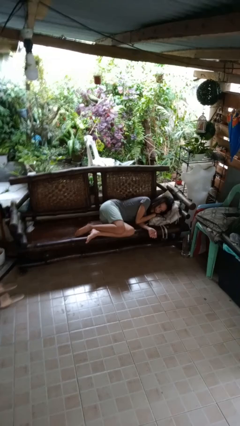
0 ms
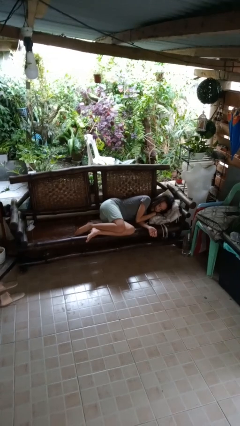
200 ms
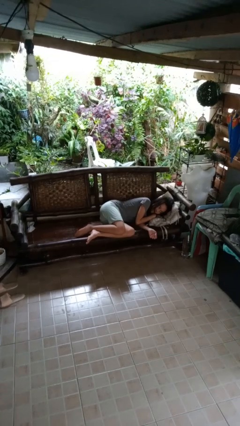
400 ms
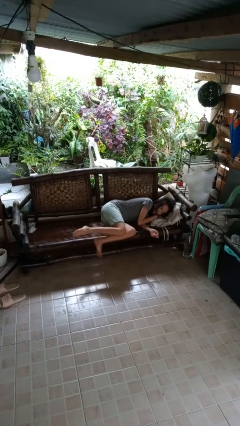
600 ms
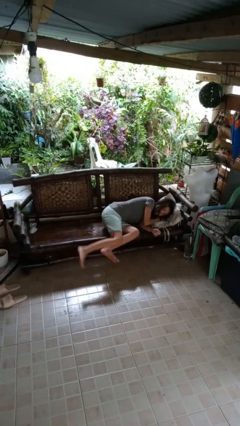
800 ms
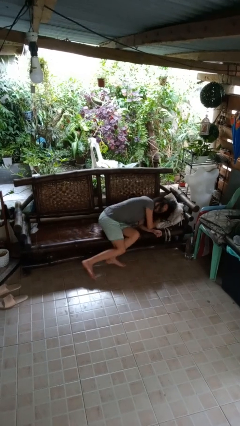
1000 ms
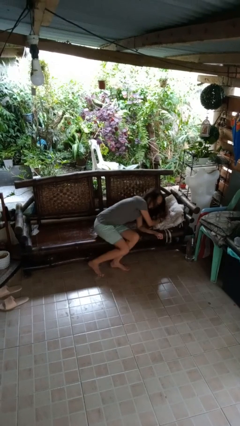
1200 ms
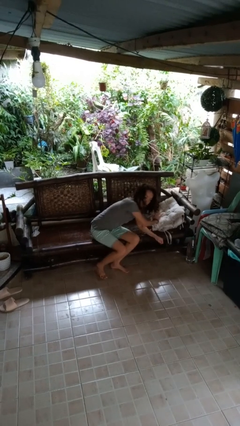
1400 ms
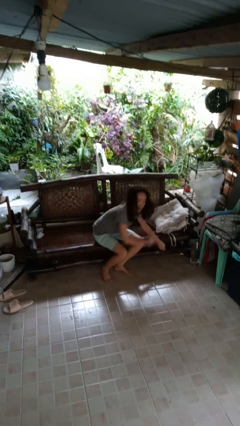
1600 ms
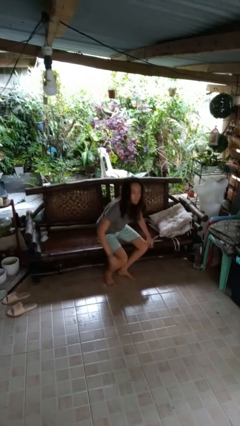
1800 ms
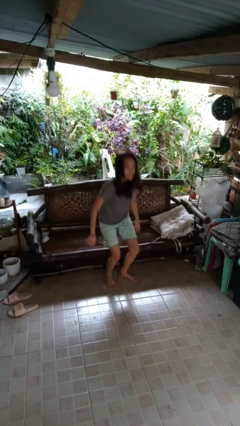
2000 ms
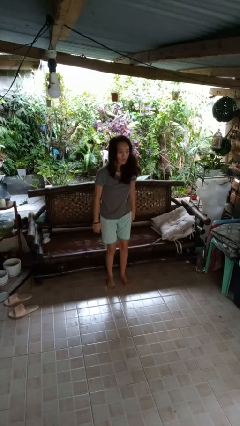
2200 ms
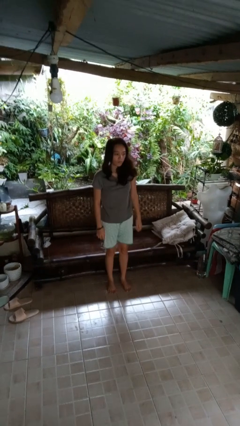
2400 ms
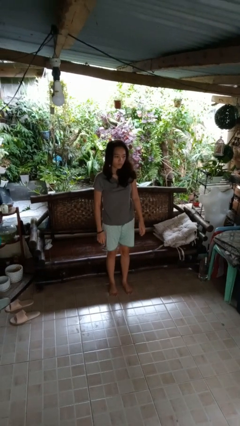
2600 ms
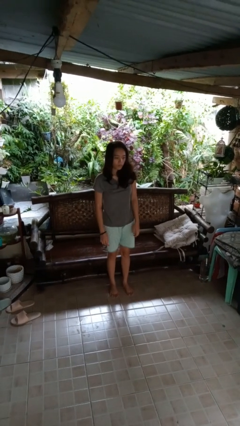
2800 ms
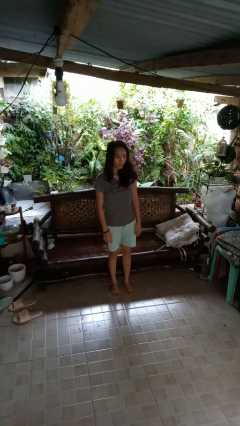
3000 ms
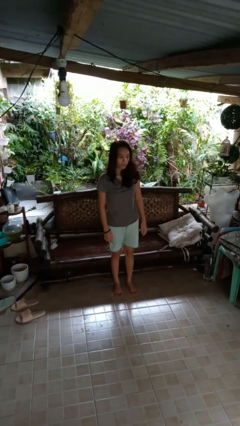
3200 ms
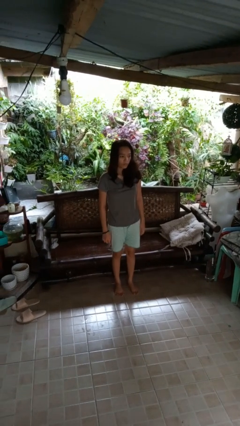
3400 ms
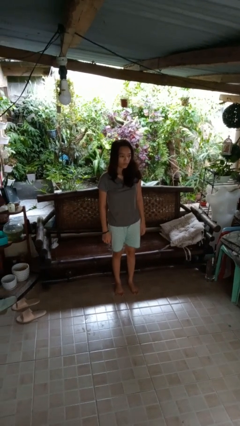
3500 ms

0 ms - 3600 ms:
person stands up

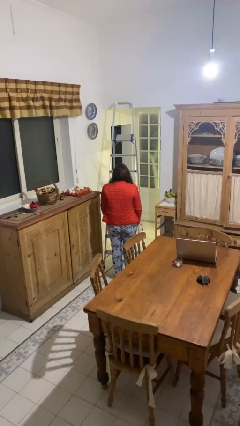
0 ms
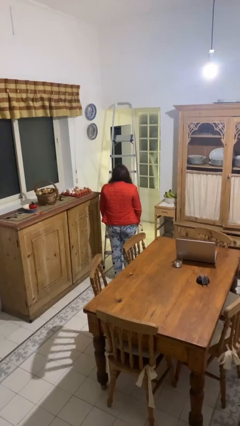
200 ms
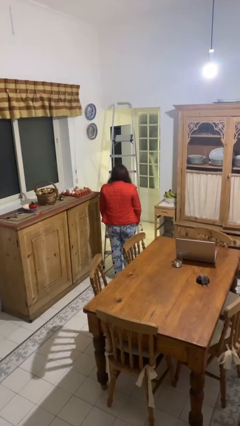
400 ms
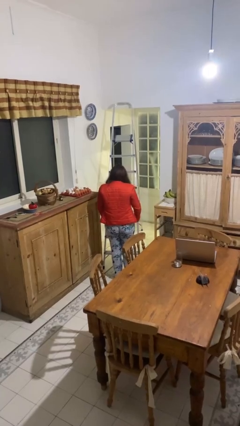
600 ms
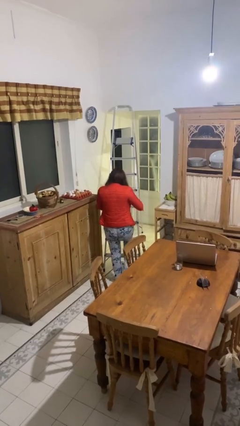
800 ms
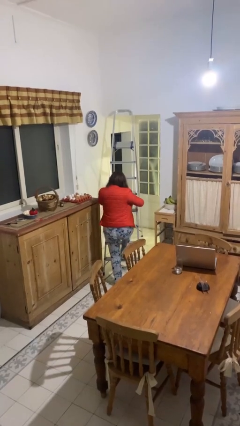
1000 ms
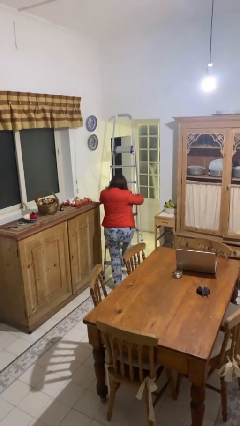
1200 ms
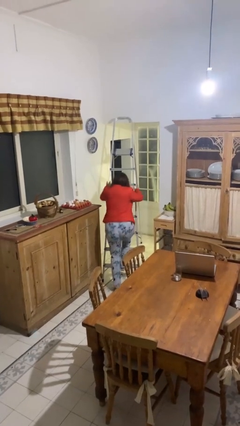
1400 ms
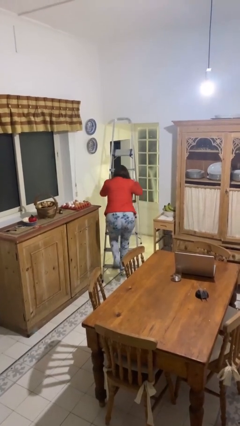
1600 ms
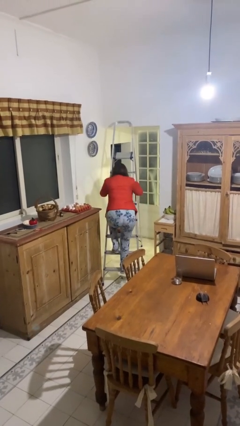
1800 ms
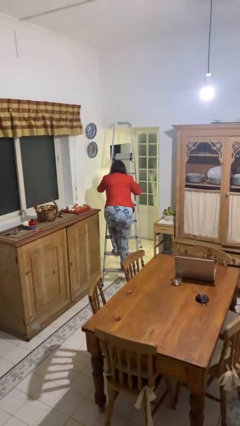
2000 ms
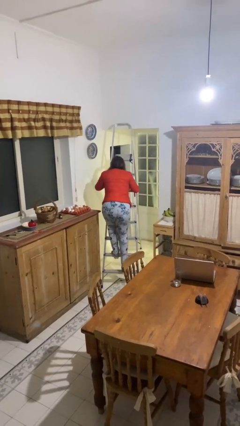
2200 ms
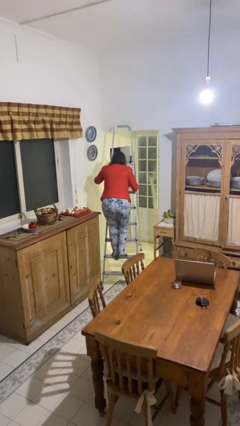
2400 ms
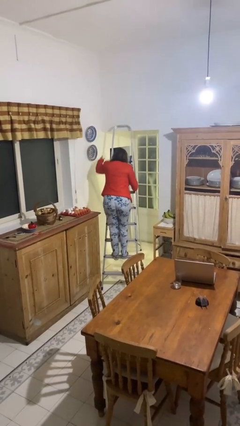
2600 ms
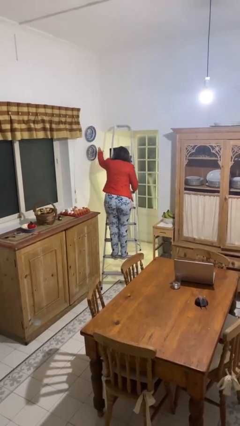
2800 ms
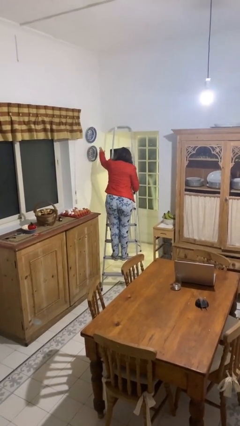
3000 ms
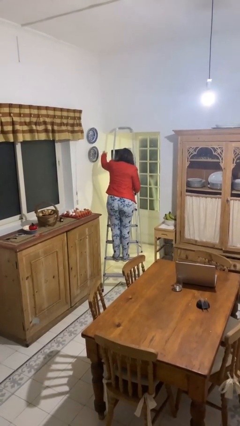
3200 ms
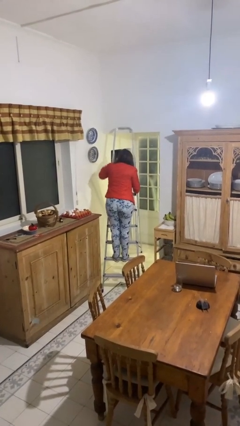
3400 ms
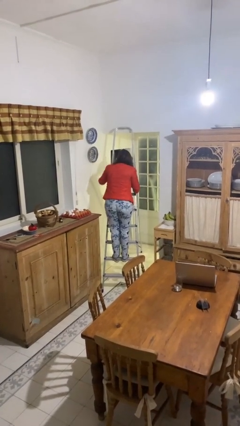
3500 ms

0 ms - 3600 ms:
person climbs up ladder

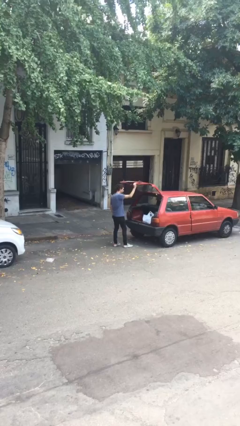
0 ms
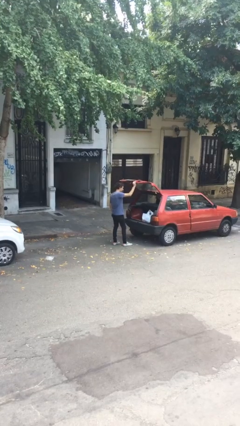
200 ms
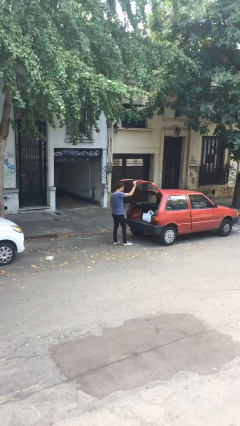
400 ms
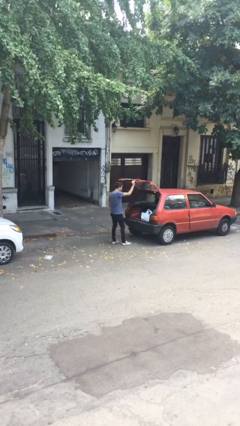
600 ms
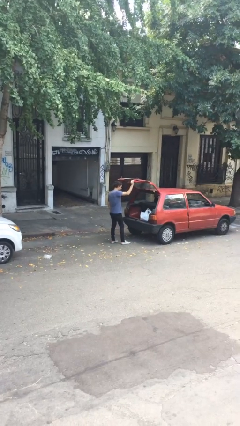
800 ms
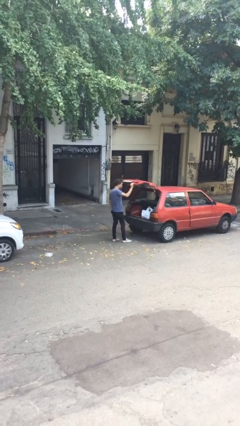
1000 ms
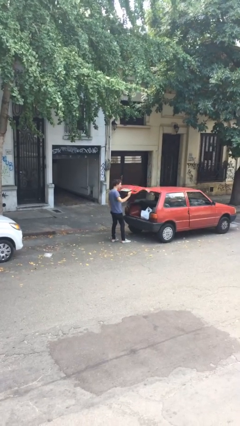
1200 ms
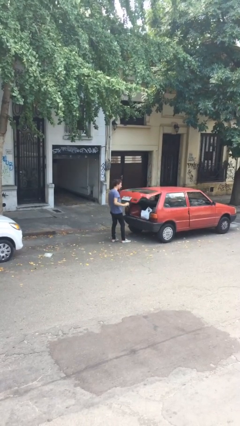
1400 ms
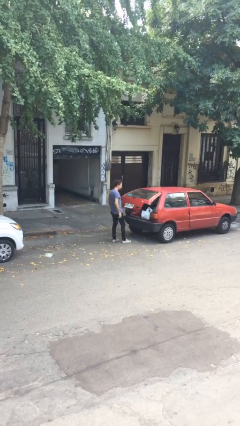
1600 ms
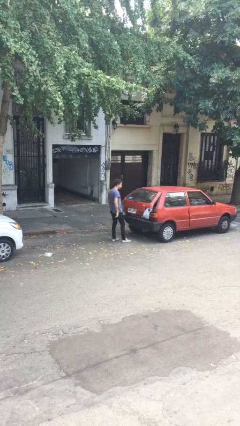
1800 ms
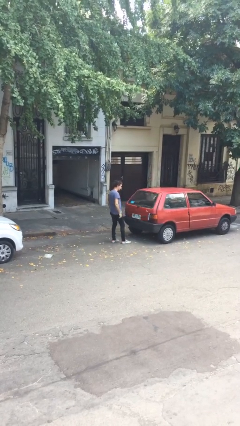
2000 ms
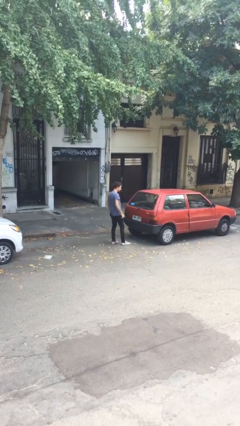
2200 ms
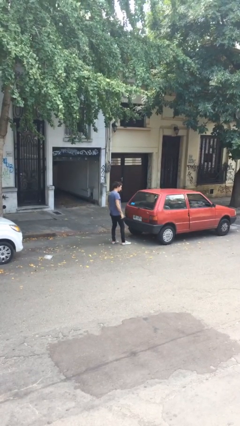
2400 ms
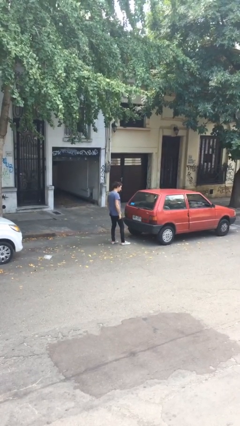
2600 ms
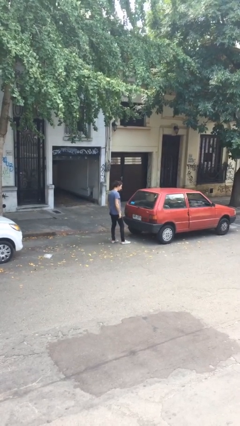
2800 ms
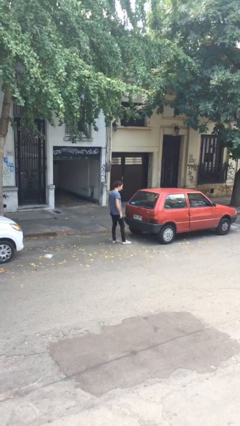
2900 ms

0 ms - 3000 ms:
person closes car trunk

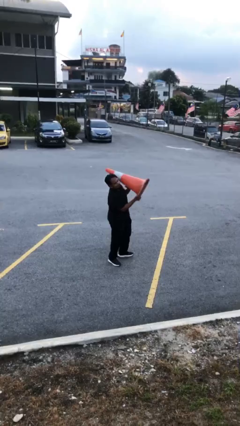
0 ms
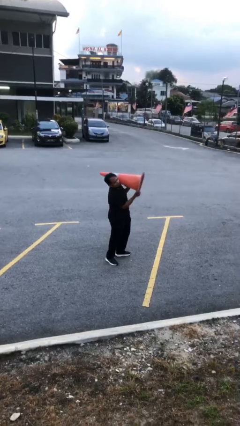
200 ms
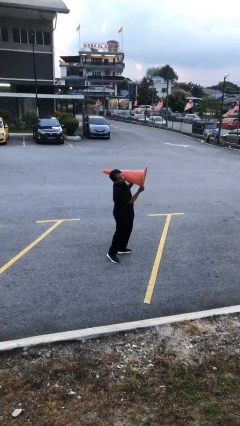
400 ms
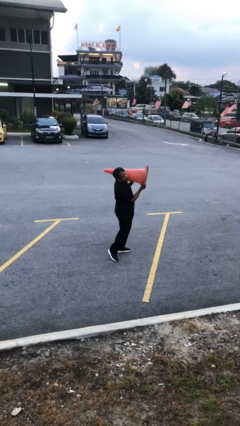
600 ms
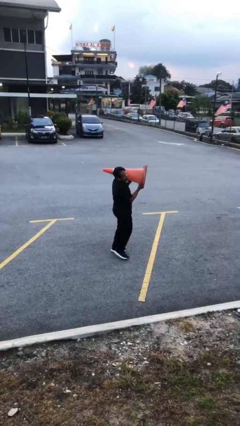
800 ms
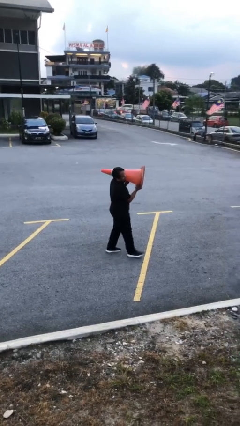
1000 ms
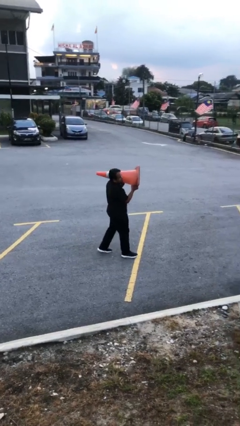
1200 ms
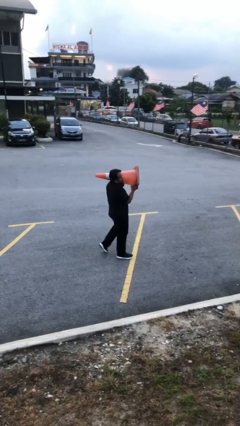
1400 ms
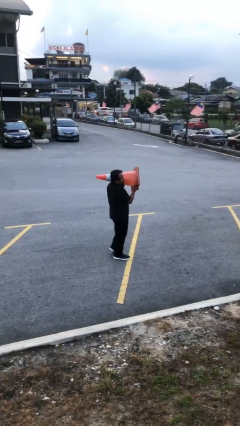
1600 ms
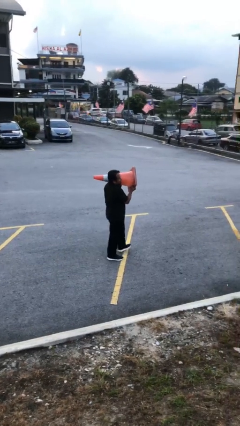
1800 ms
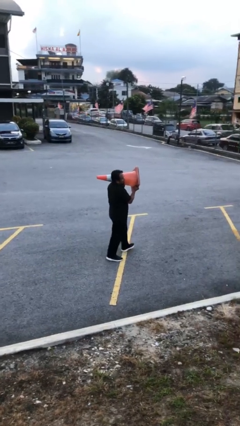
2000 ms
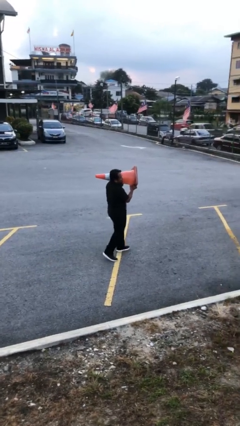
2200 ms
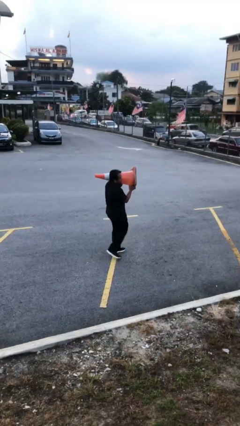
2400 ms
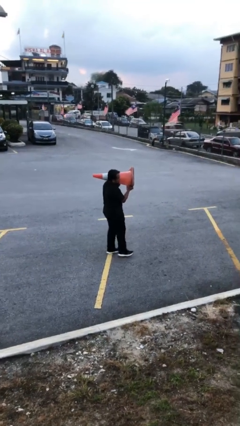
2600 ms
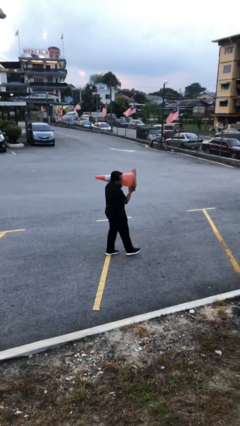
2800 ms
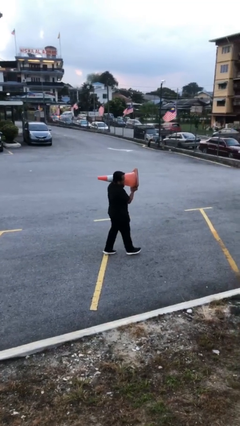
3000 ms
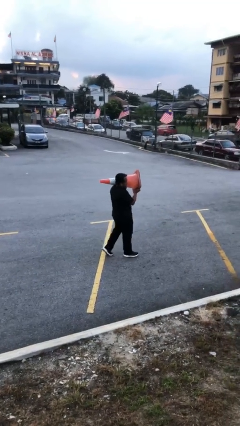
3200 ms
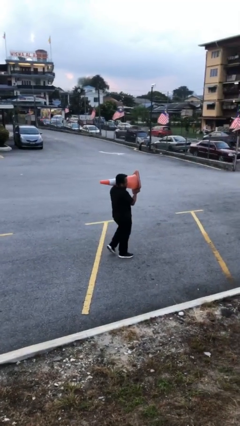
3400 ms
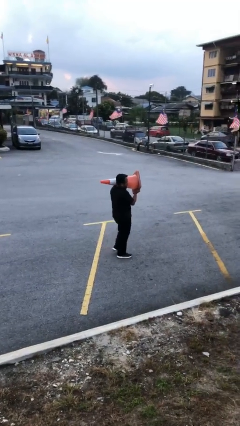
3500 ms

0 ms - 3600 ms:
person carries heavy object

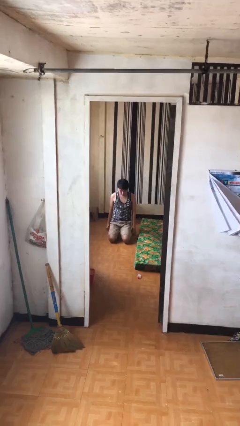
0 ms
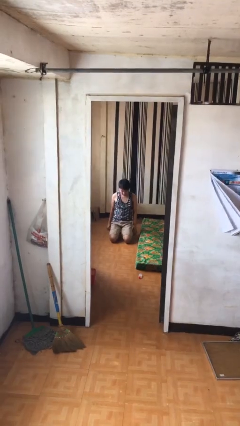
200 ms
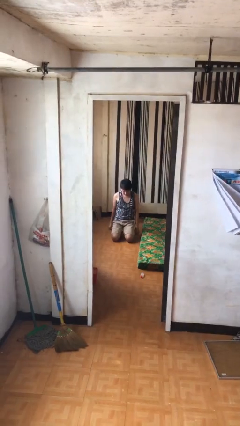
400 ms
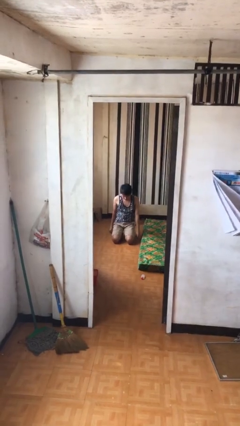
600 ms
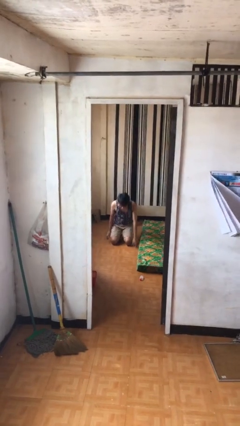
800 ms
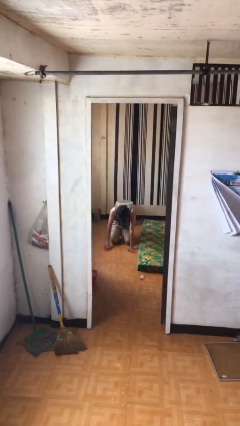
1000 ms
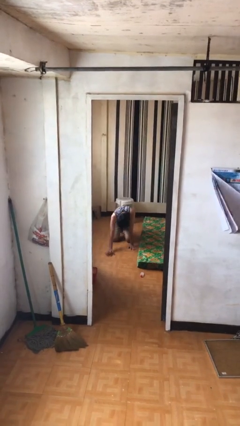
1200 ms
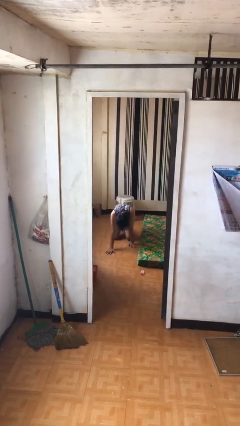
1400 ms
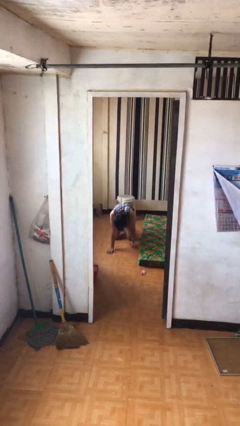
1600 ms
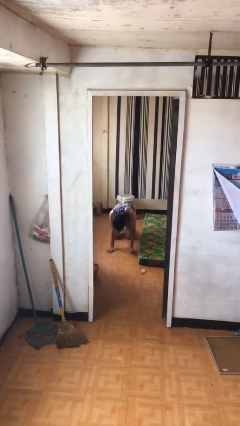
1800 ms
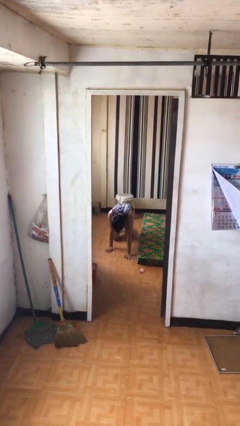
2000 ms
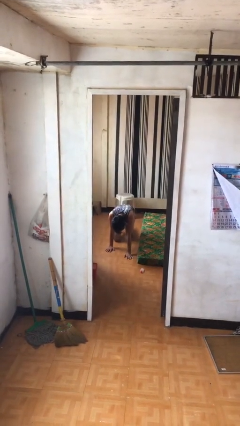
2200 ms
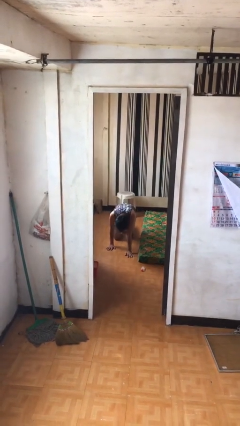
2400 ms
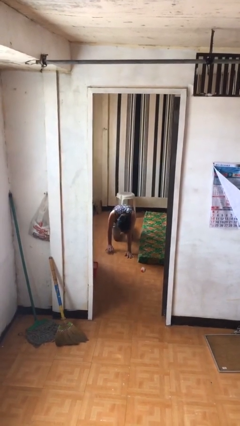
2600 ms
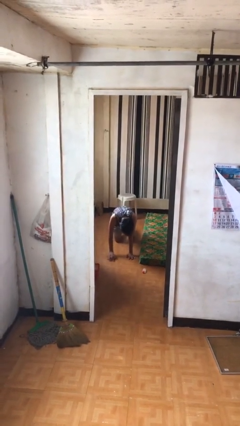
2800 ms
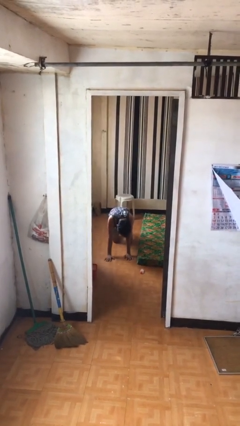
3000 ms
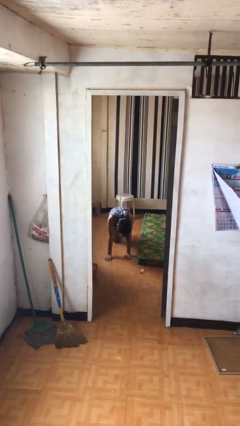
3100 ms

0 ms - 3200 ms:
person crawls

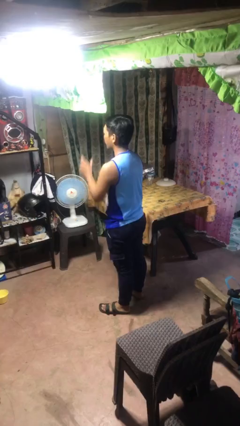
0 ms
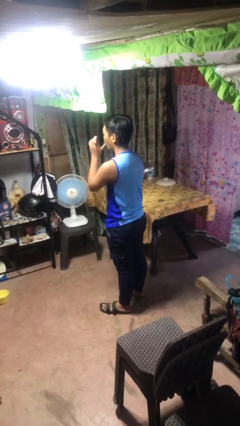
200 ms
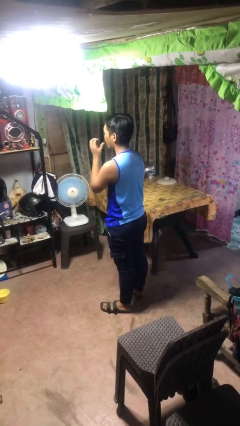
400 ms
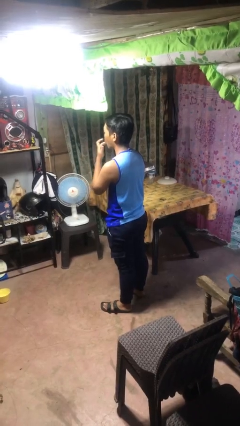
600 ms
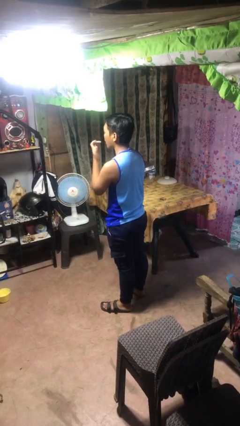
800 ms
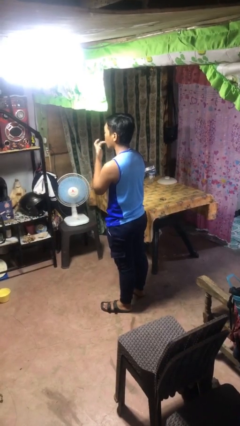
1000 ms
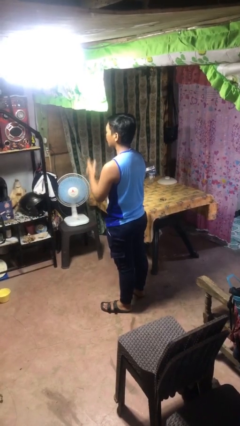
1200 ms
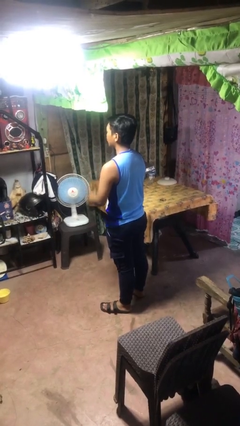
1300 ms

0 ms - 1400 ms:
person licks fingers
